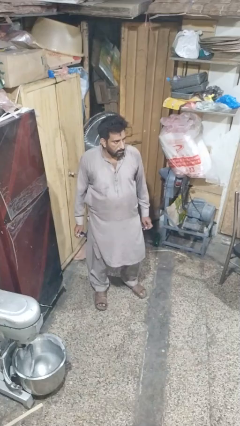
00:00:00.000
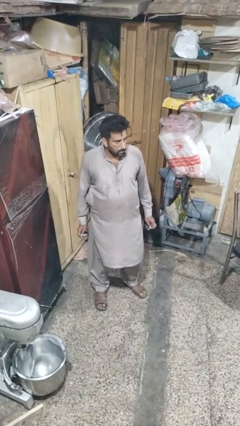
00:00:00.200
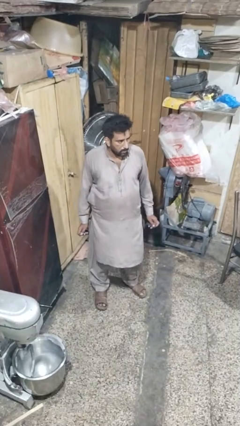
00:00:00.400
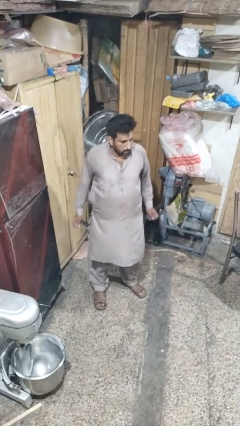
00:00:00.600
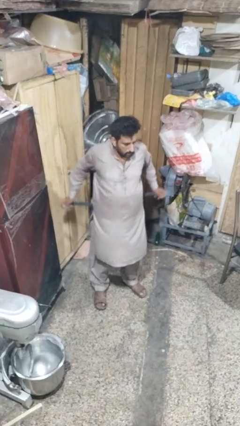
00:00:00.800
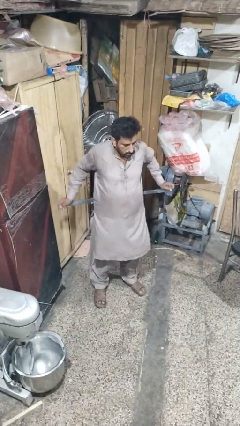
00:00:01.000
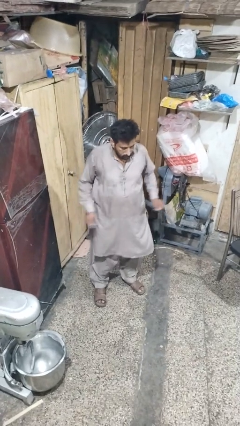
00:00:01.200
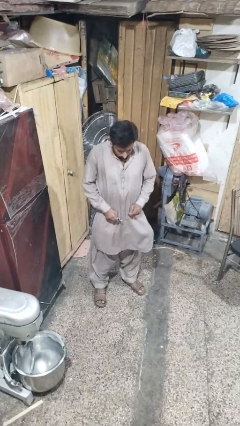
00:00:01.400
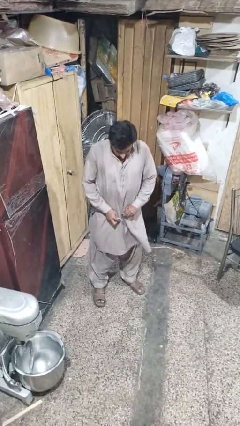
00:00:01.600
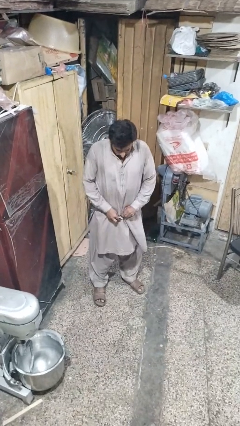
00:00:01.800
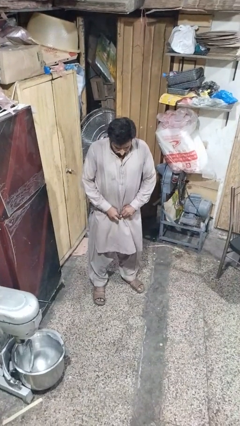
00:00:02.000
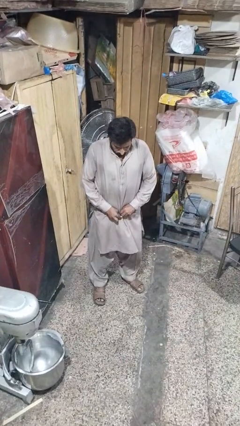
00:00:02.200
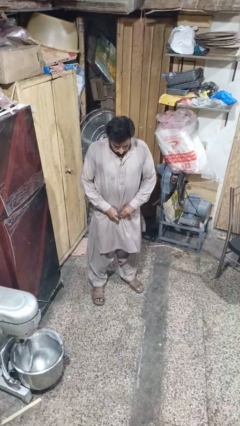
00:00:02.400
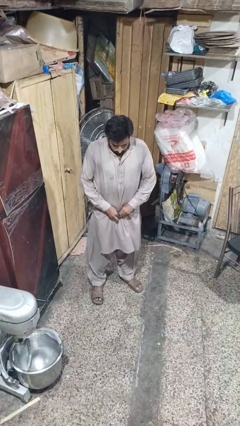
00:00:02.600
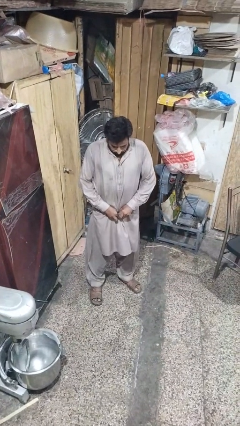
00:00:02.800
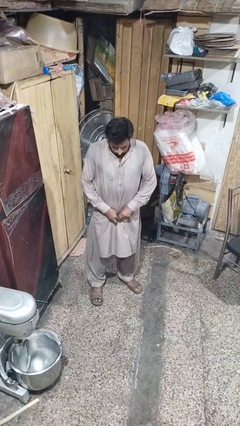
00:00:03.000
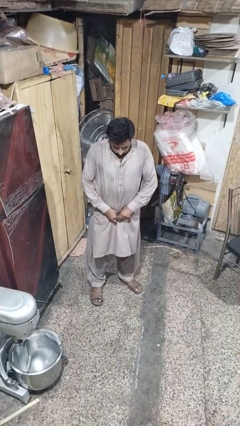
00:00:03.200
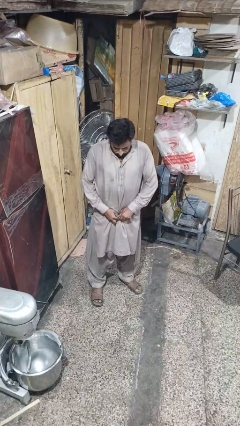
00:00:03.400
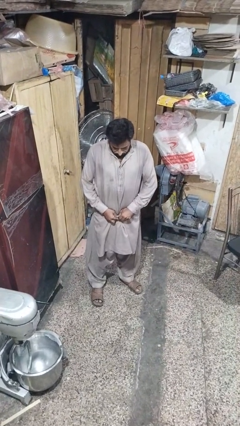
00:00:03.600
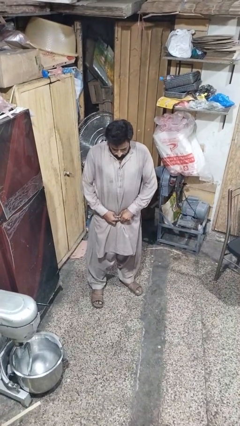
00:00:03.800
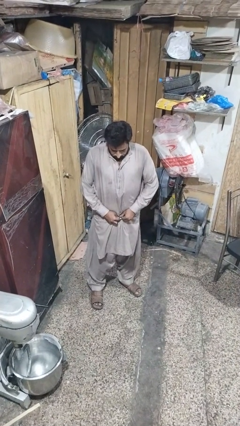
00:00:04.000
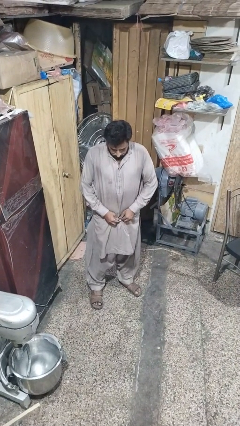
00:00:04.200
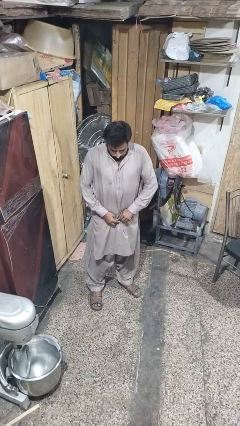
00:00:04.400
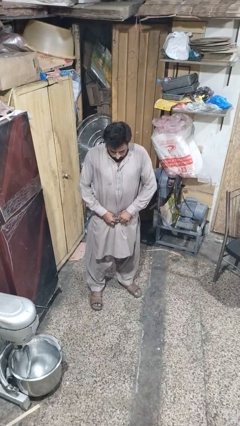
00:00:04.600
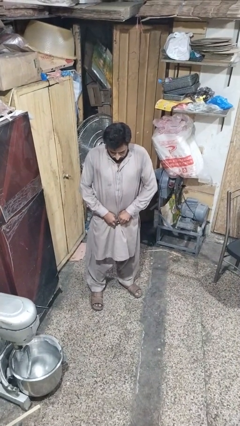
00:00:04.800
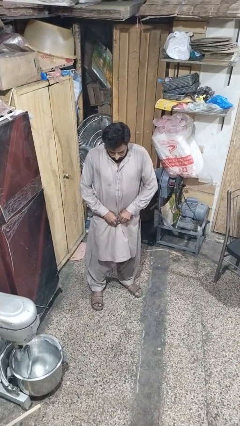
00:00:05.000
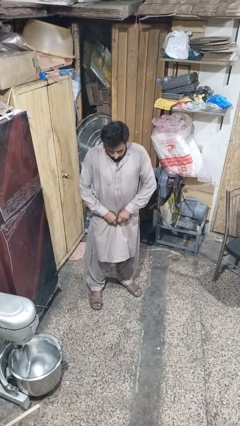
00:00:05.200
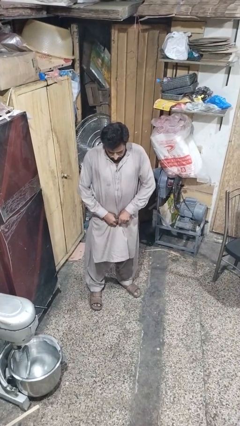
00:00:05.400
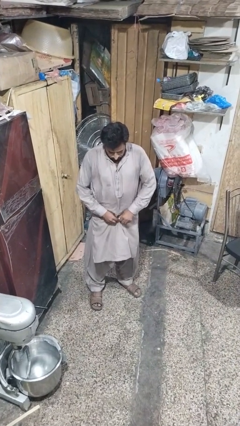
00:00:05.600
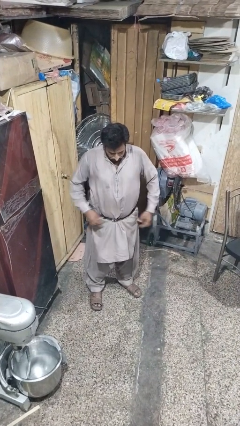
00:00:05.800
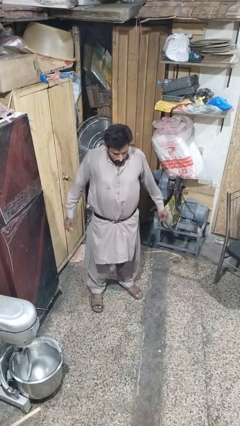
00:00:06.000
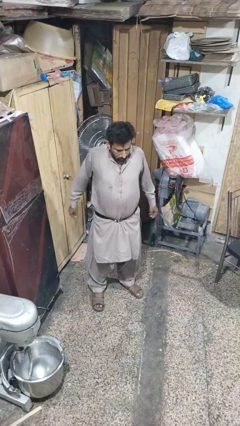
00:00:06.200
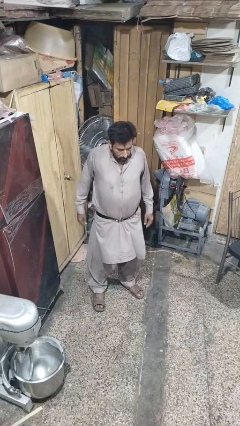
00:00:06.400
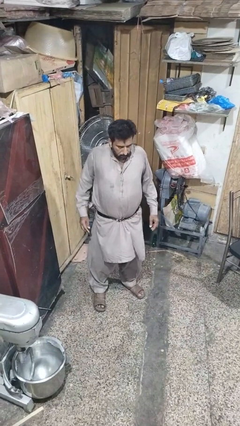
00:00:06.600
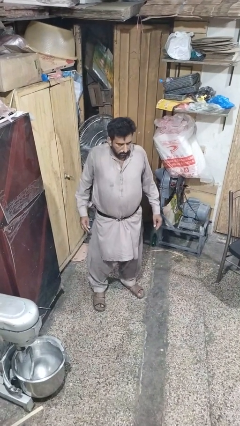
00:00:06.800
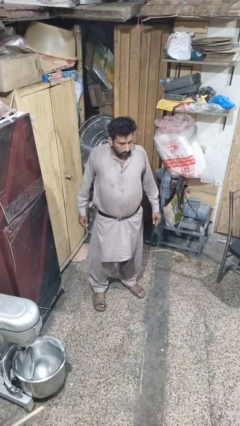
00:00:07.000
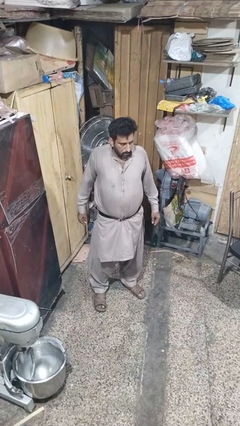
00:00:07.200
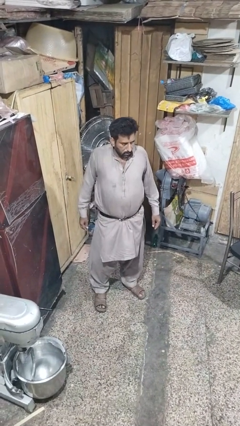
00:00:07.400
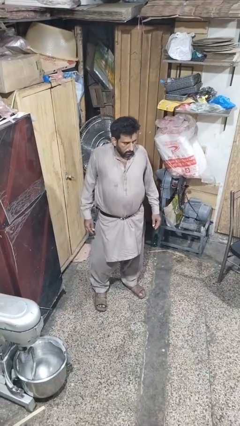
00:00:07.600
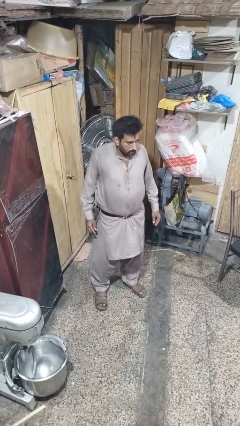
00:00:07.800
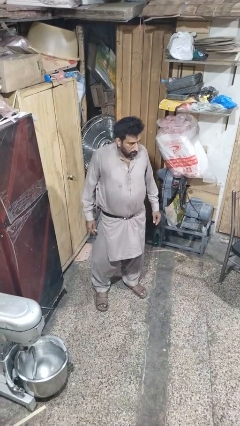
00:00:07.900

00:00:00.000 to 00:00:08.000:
person puts on belt

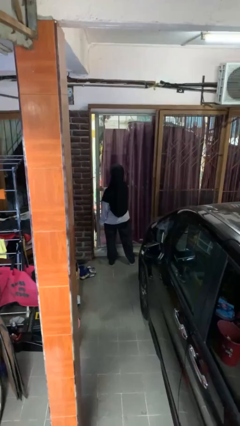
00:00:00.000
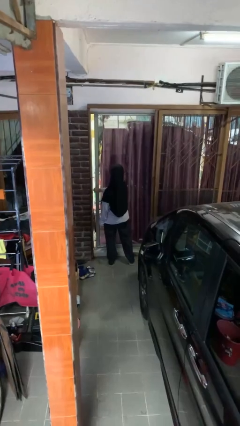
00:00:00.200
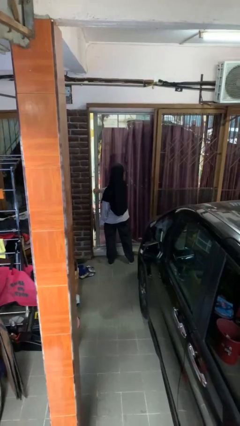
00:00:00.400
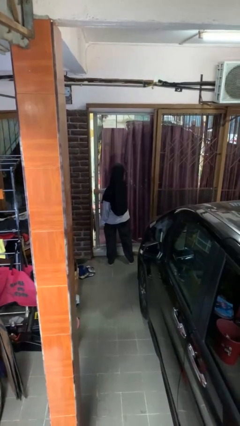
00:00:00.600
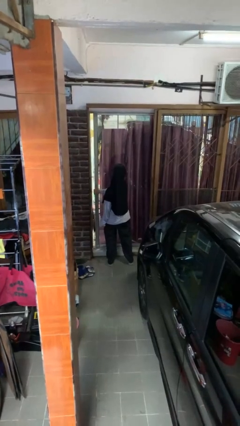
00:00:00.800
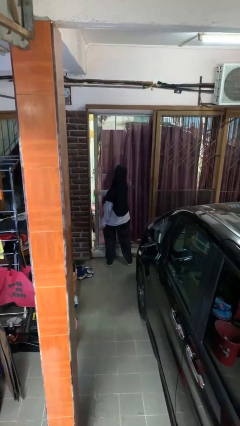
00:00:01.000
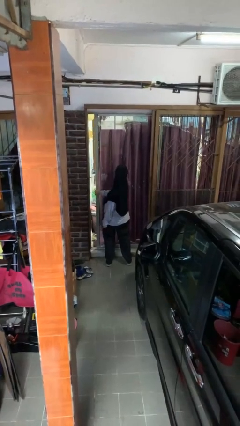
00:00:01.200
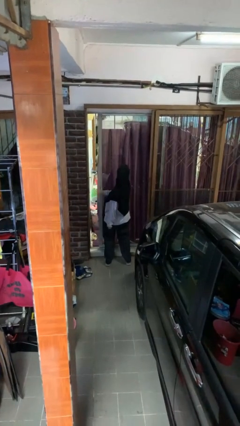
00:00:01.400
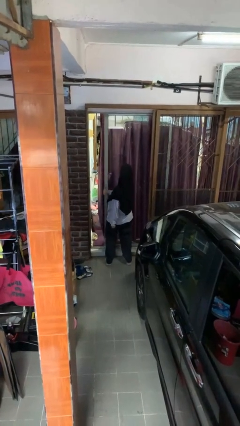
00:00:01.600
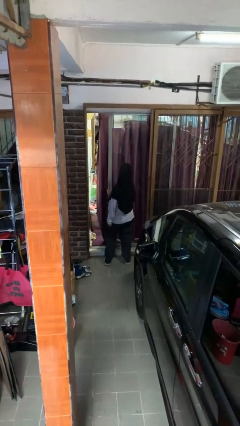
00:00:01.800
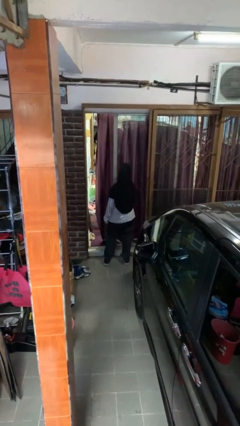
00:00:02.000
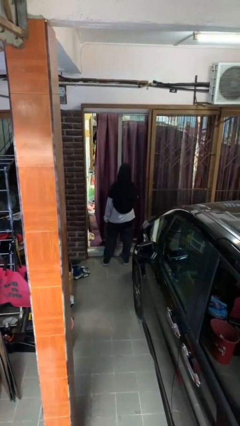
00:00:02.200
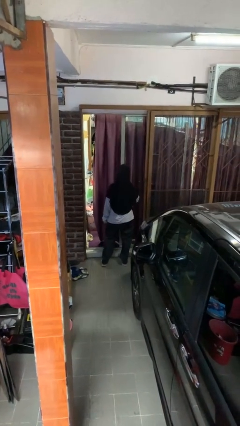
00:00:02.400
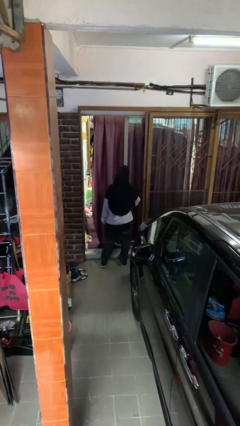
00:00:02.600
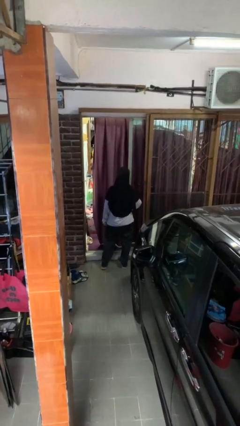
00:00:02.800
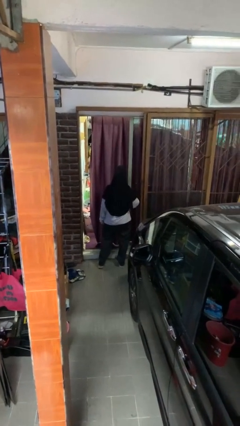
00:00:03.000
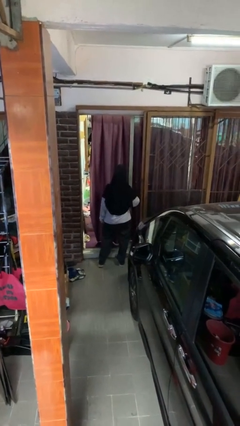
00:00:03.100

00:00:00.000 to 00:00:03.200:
person opens sliding door

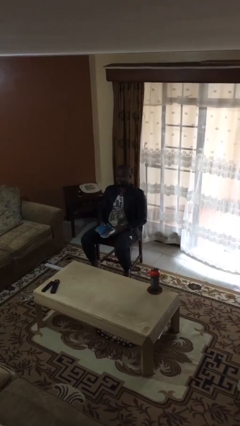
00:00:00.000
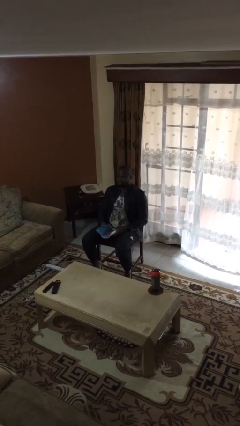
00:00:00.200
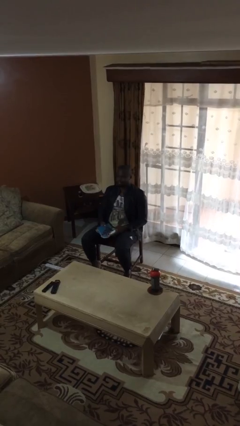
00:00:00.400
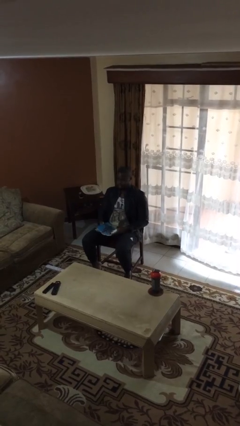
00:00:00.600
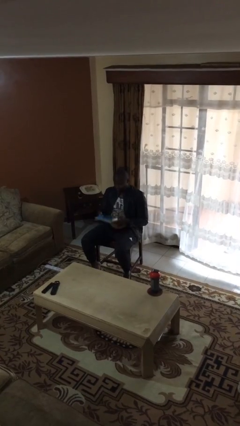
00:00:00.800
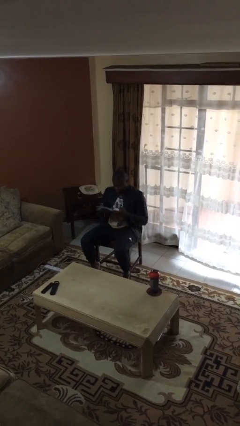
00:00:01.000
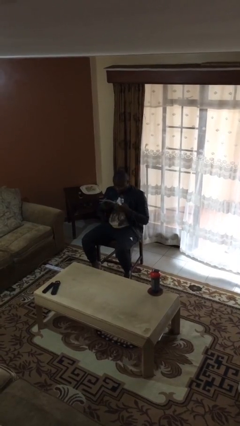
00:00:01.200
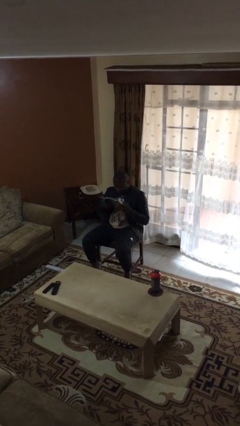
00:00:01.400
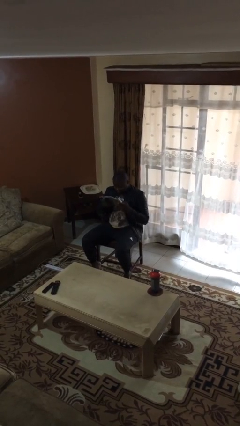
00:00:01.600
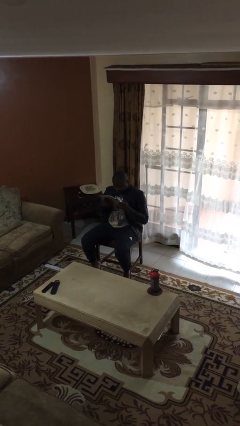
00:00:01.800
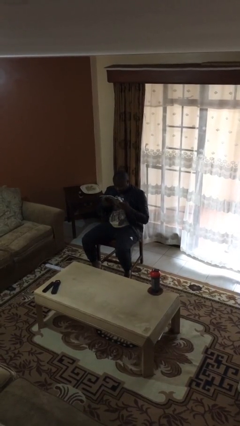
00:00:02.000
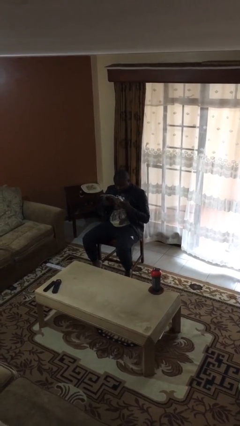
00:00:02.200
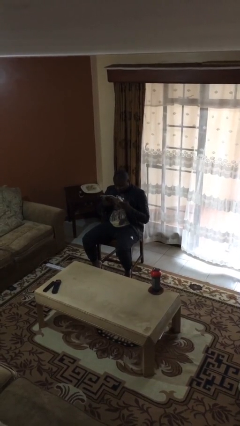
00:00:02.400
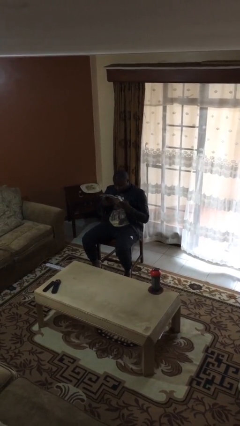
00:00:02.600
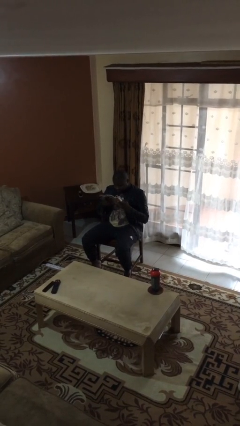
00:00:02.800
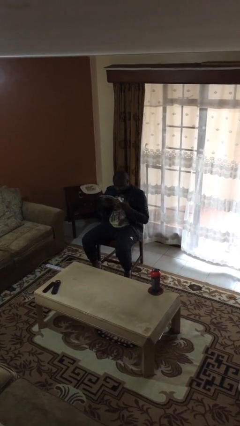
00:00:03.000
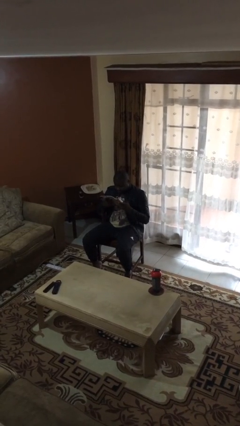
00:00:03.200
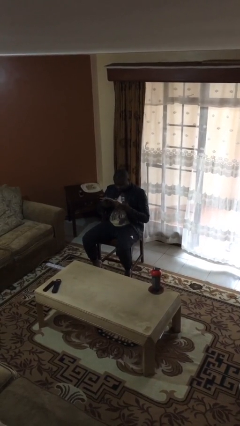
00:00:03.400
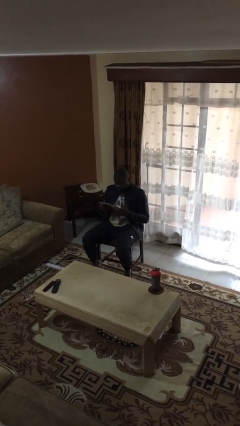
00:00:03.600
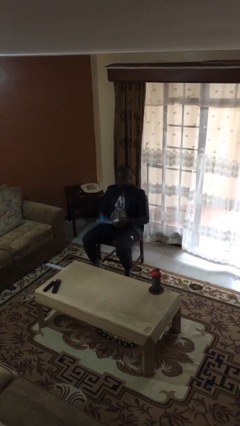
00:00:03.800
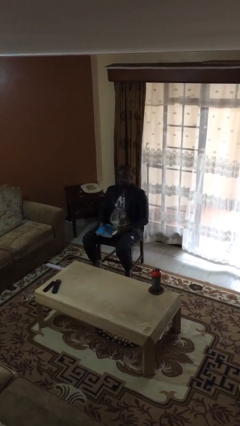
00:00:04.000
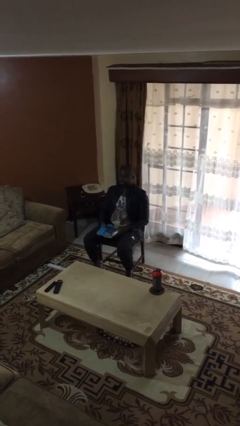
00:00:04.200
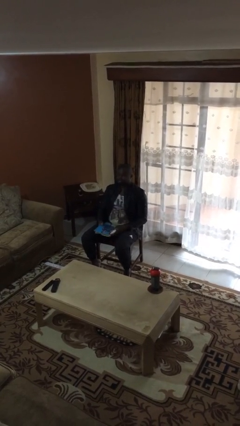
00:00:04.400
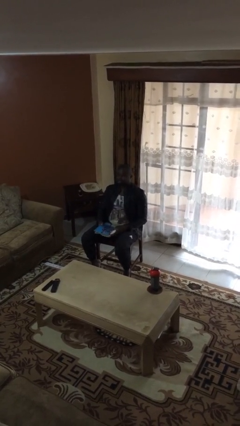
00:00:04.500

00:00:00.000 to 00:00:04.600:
person reads document

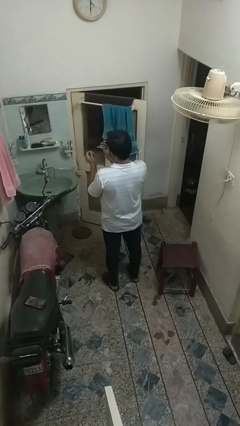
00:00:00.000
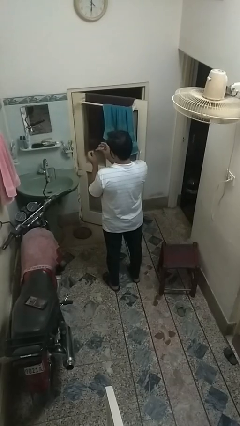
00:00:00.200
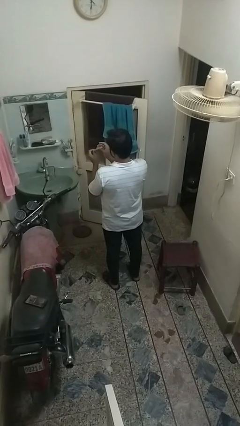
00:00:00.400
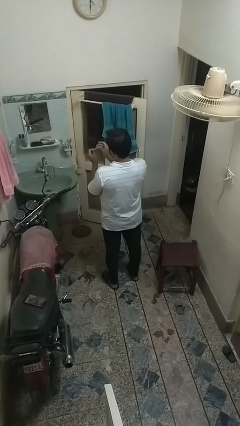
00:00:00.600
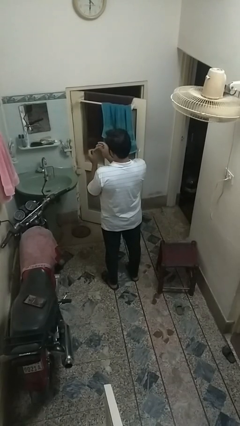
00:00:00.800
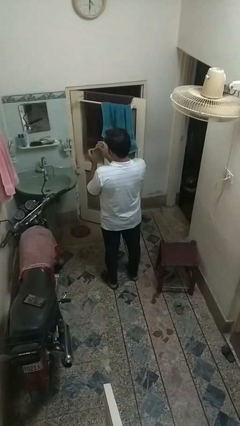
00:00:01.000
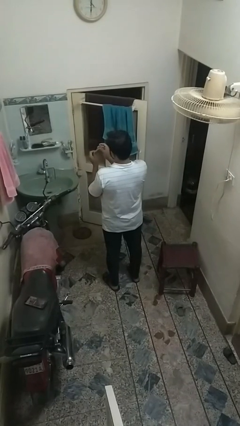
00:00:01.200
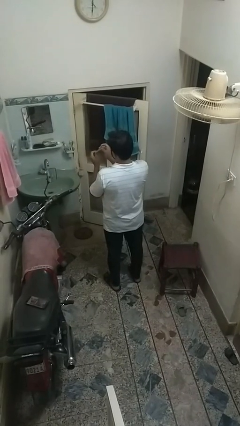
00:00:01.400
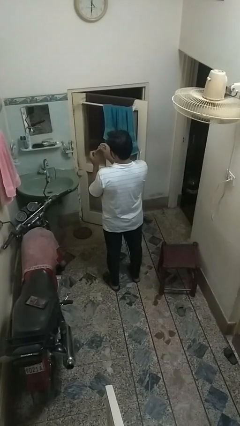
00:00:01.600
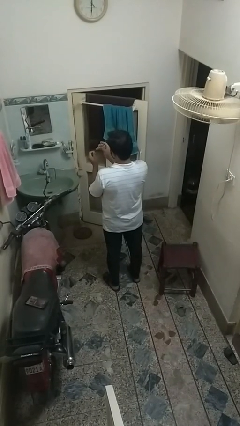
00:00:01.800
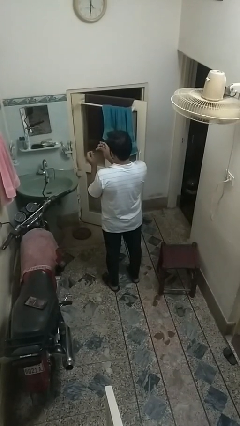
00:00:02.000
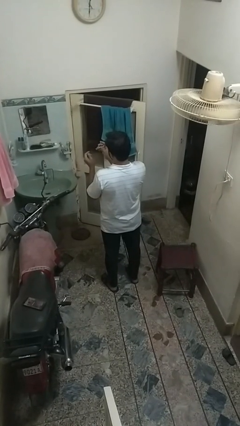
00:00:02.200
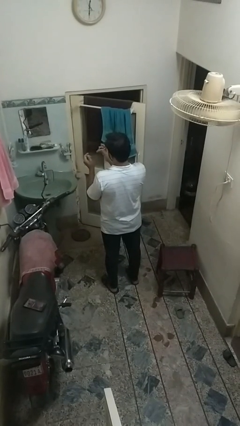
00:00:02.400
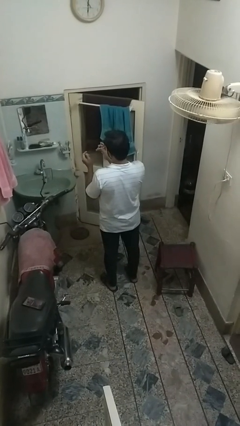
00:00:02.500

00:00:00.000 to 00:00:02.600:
person clips fingernails
